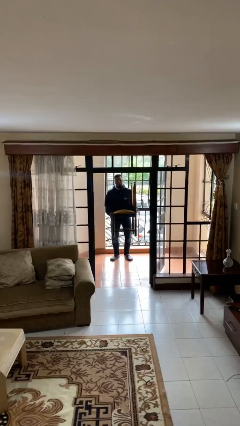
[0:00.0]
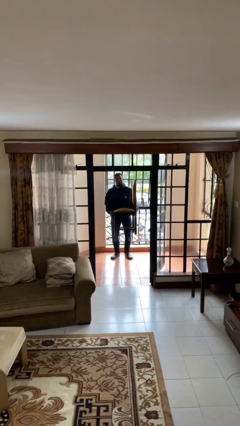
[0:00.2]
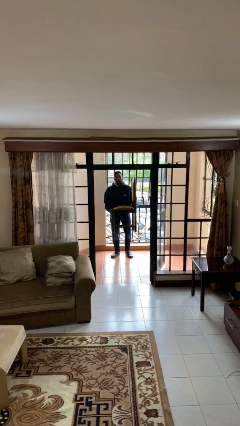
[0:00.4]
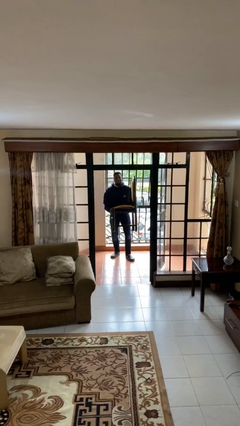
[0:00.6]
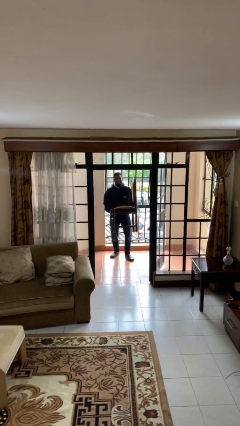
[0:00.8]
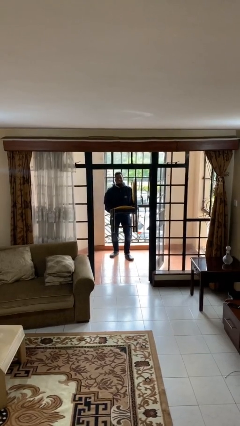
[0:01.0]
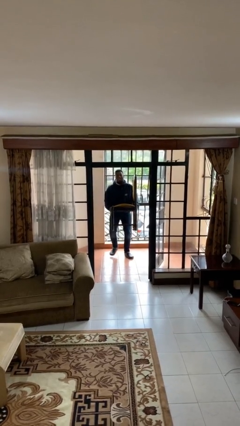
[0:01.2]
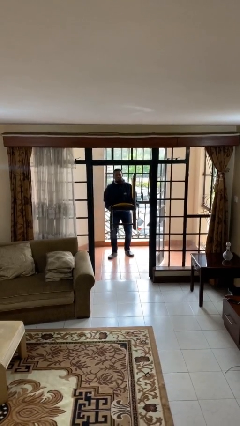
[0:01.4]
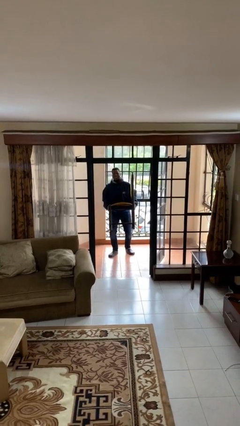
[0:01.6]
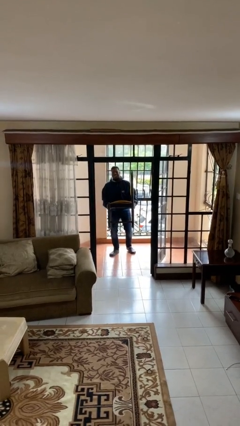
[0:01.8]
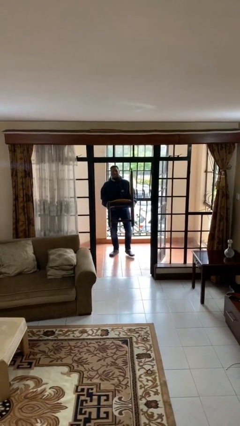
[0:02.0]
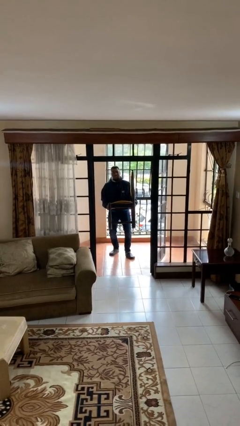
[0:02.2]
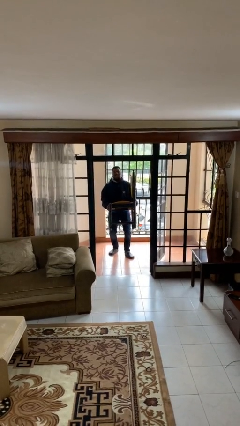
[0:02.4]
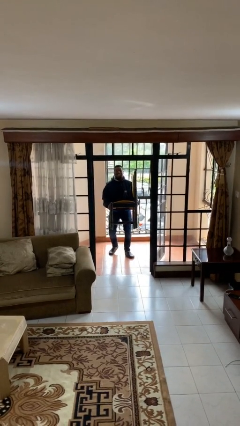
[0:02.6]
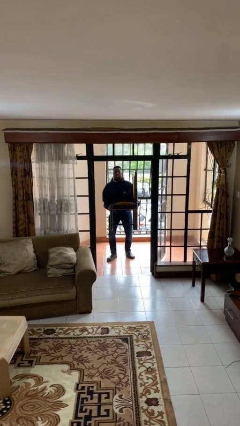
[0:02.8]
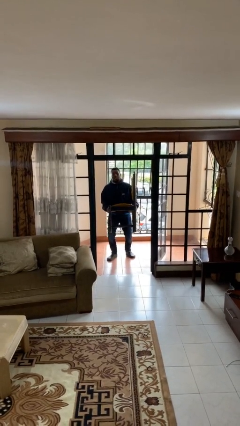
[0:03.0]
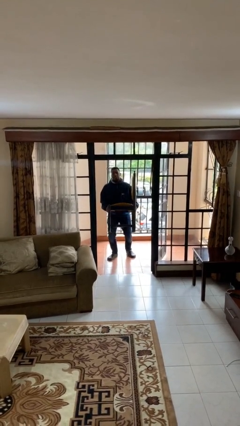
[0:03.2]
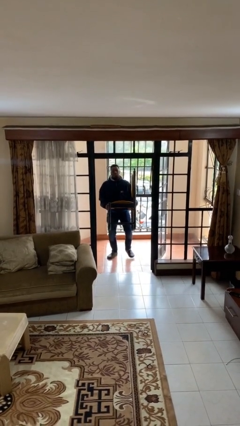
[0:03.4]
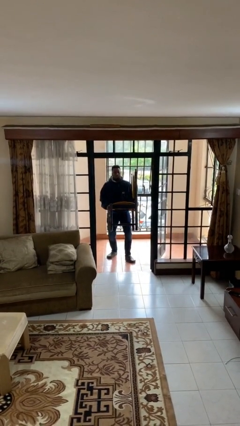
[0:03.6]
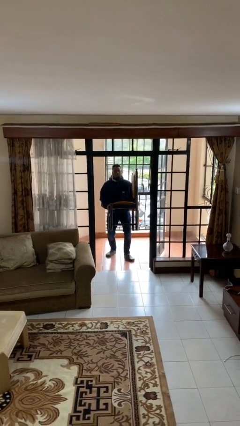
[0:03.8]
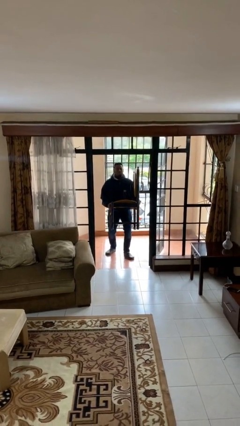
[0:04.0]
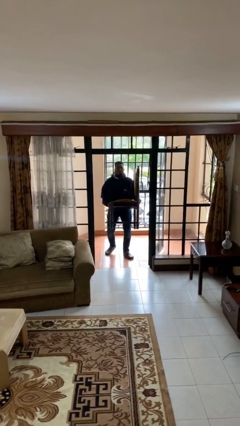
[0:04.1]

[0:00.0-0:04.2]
person carries heavy object

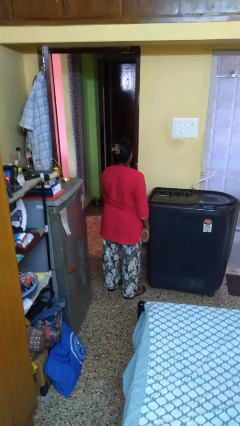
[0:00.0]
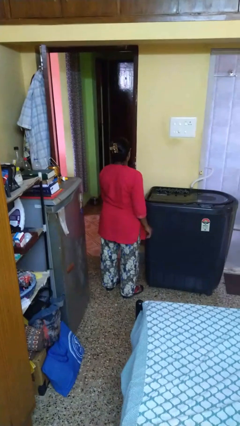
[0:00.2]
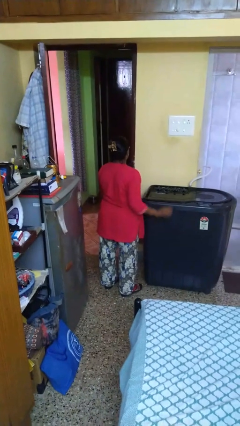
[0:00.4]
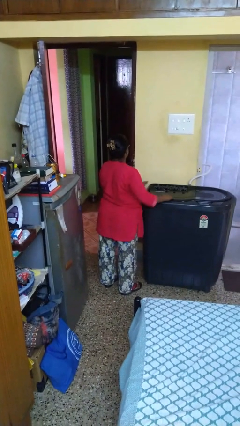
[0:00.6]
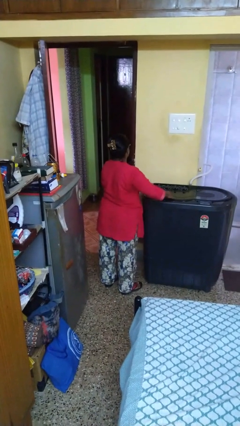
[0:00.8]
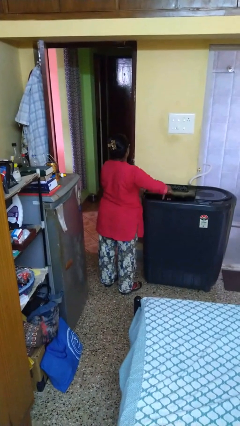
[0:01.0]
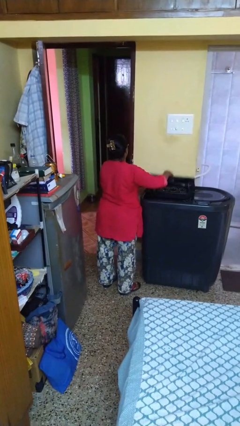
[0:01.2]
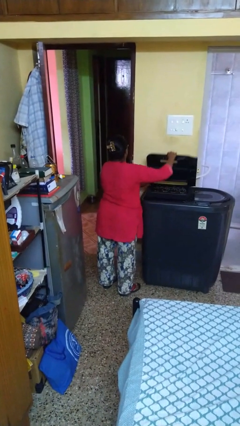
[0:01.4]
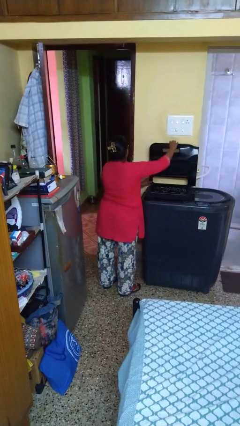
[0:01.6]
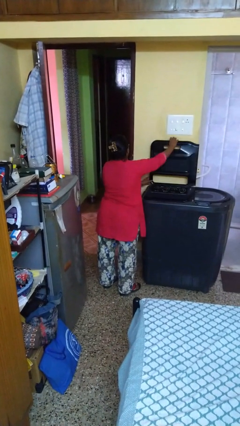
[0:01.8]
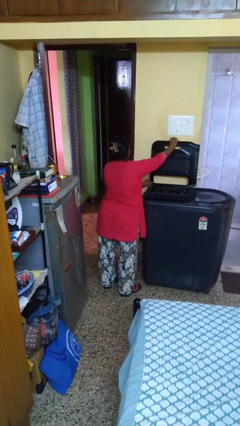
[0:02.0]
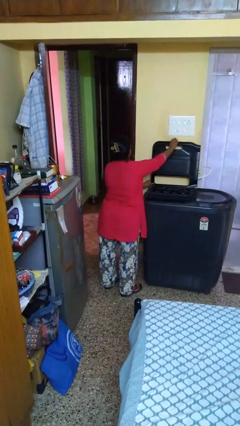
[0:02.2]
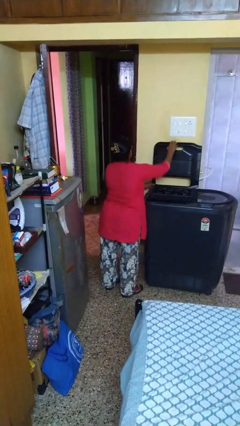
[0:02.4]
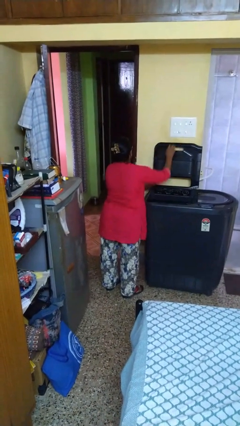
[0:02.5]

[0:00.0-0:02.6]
person opens clothes washer

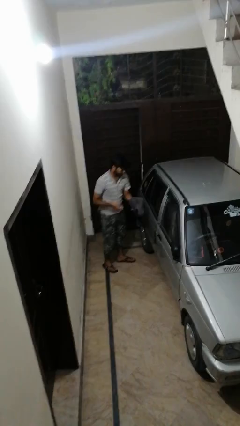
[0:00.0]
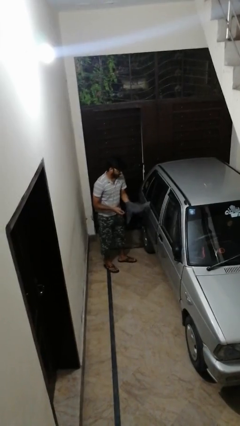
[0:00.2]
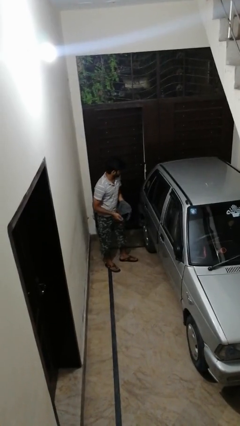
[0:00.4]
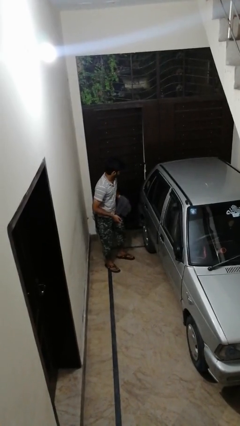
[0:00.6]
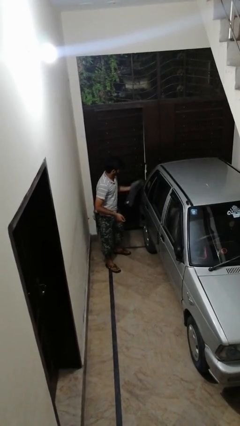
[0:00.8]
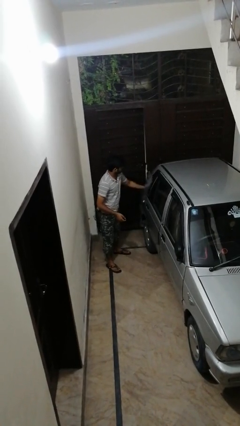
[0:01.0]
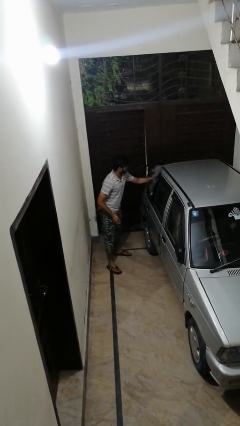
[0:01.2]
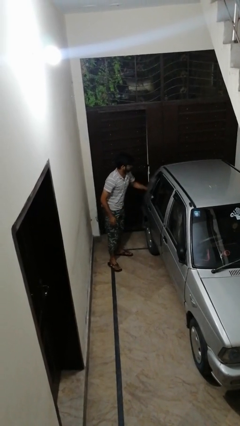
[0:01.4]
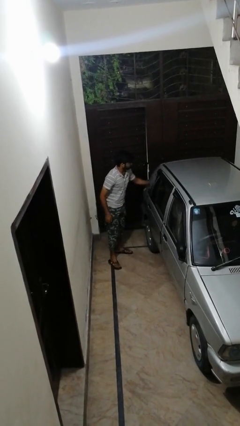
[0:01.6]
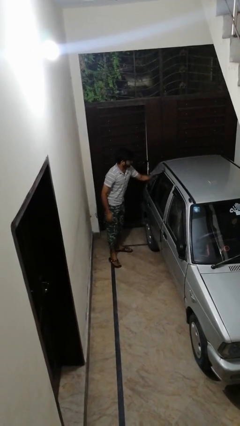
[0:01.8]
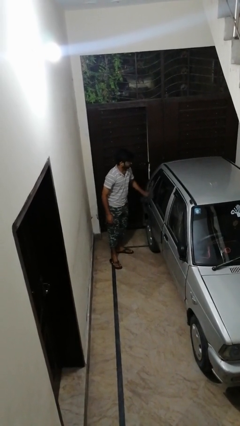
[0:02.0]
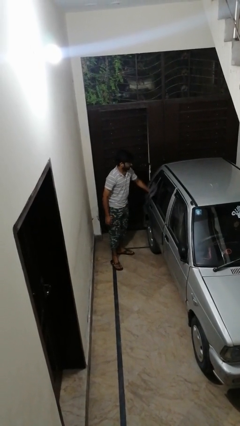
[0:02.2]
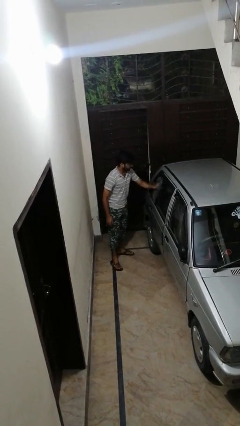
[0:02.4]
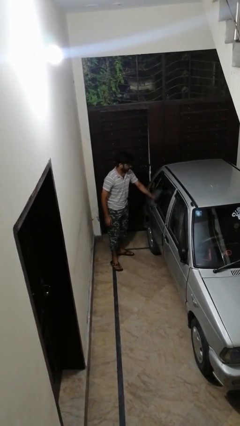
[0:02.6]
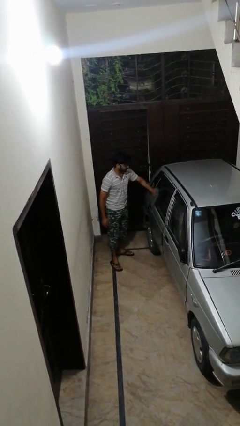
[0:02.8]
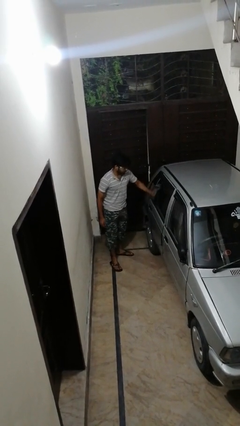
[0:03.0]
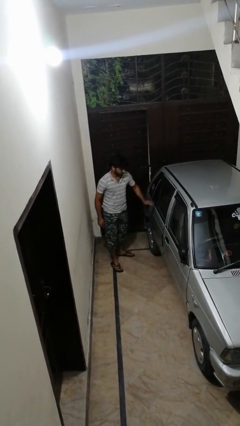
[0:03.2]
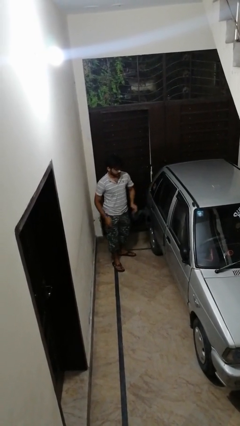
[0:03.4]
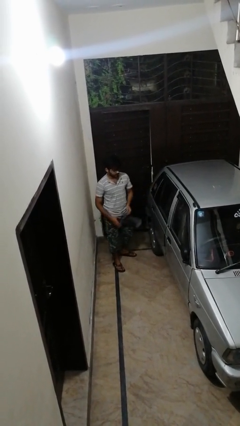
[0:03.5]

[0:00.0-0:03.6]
person polishes car with rag

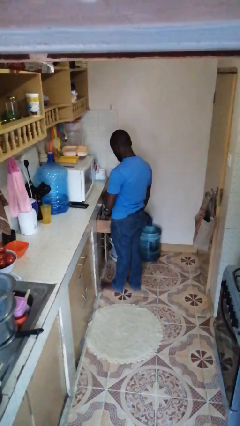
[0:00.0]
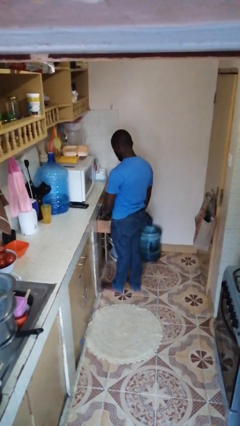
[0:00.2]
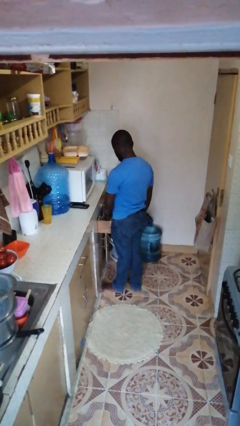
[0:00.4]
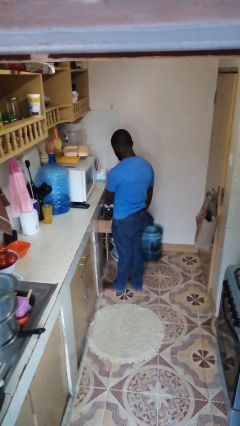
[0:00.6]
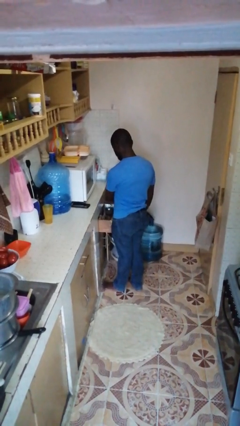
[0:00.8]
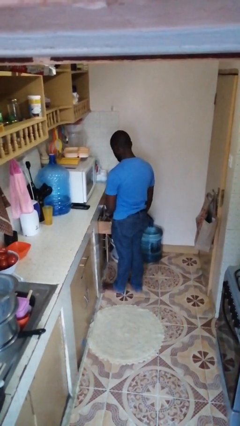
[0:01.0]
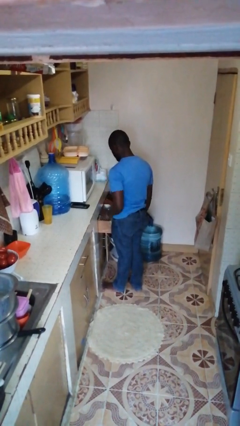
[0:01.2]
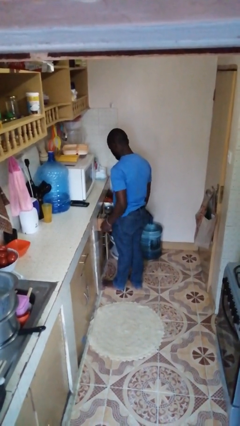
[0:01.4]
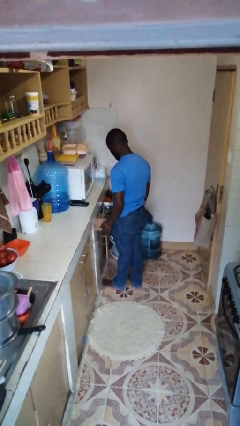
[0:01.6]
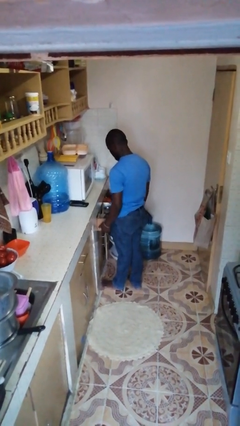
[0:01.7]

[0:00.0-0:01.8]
person puts object into kitchen drawer

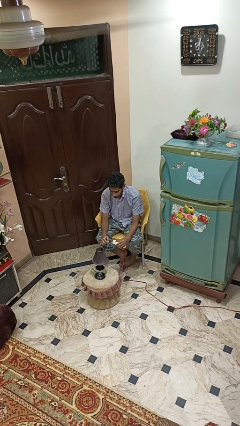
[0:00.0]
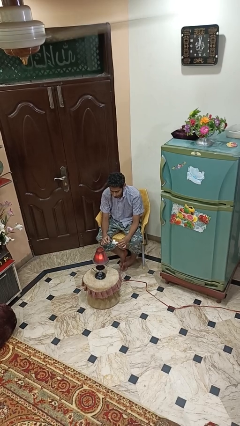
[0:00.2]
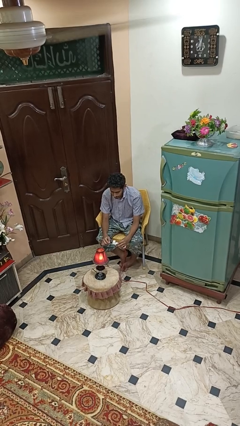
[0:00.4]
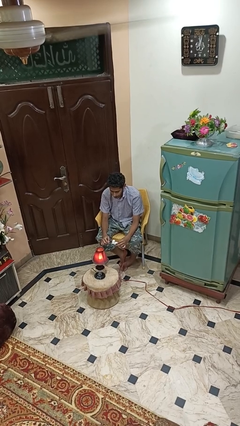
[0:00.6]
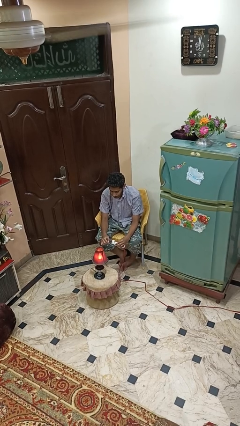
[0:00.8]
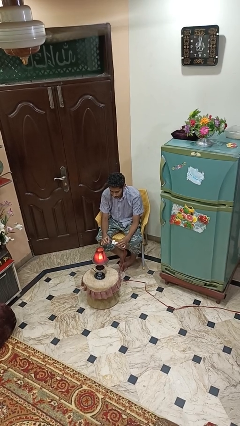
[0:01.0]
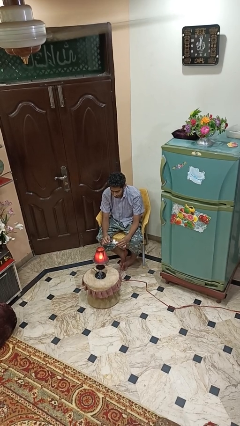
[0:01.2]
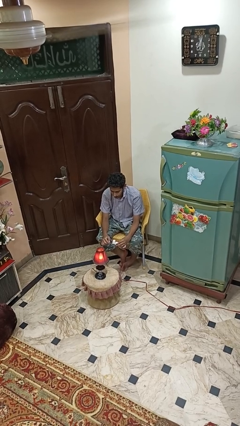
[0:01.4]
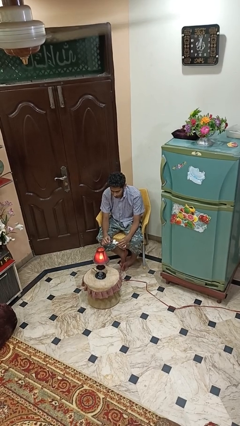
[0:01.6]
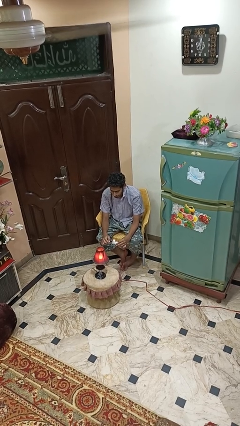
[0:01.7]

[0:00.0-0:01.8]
person turns on lamp

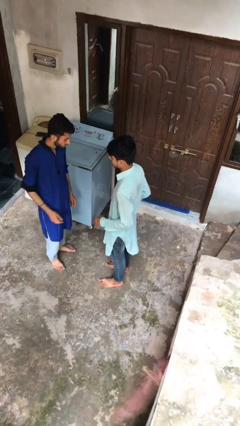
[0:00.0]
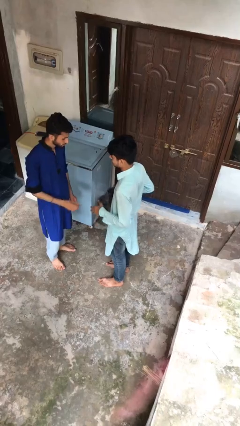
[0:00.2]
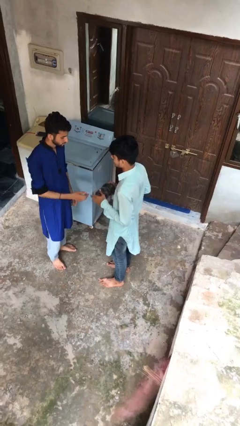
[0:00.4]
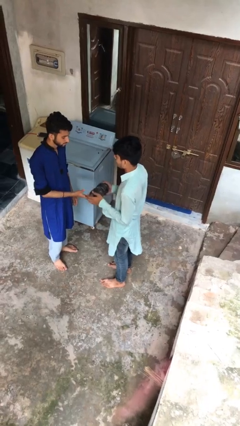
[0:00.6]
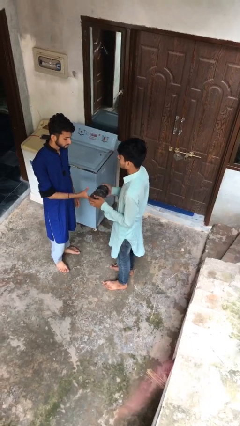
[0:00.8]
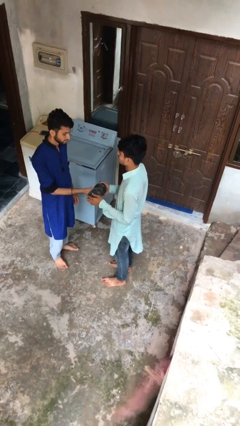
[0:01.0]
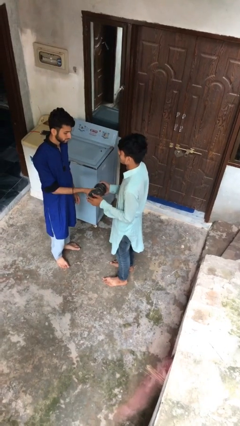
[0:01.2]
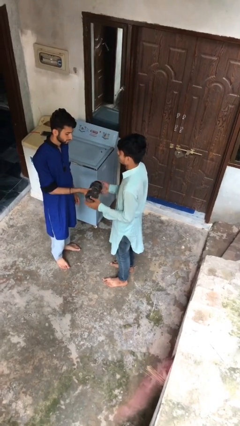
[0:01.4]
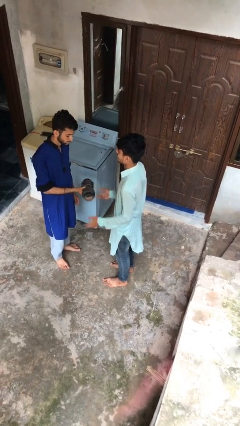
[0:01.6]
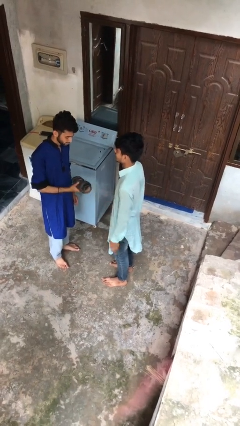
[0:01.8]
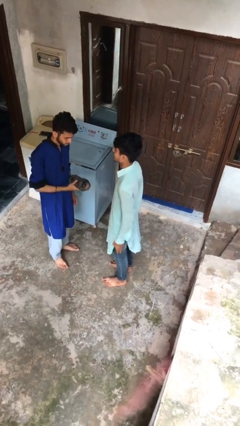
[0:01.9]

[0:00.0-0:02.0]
person transfers object to person

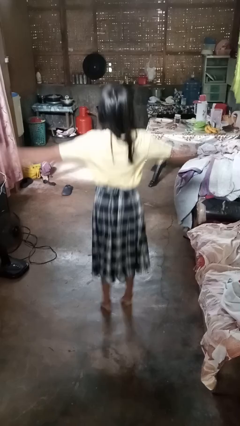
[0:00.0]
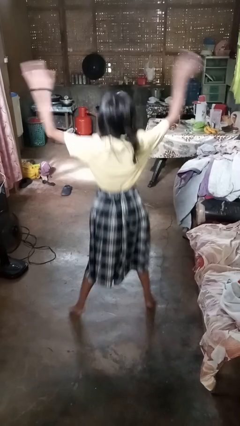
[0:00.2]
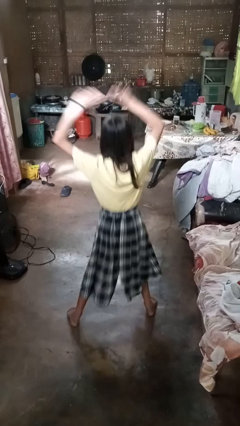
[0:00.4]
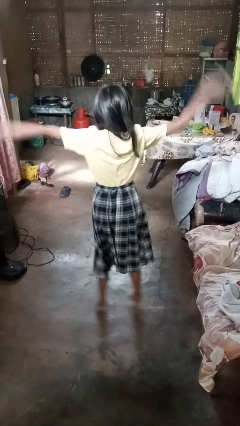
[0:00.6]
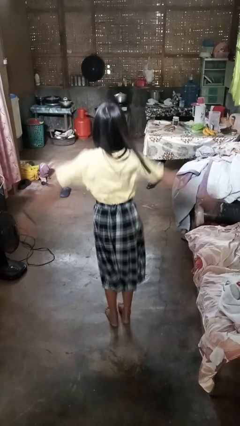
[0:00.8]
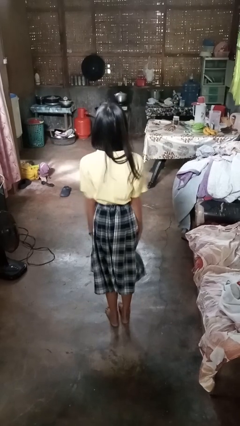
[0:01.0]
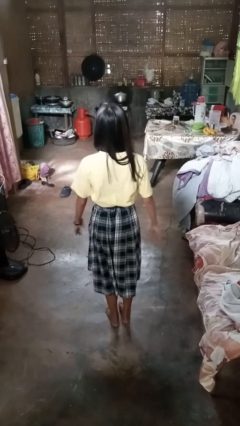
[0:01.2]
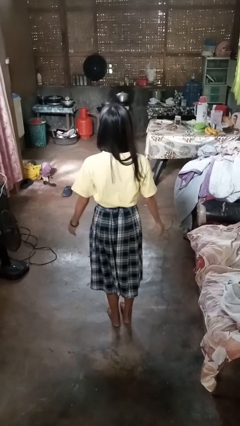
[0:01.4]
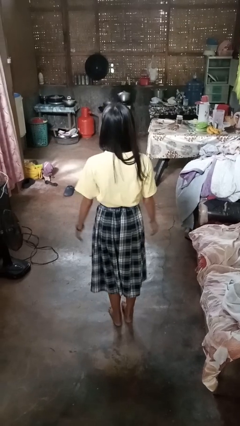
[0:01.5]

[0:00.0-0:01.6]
person exercises with jumping jacks
